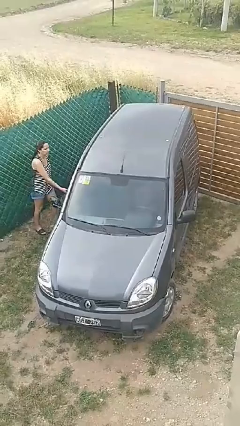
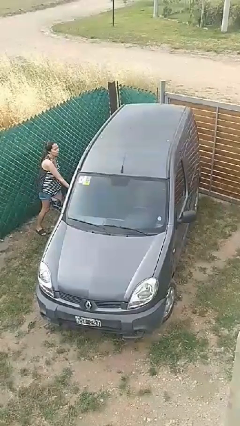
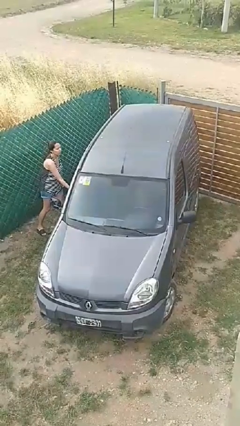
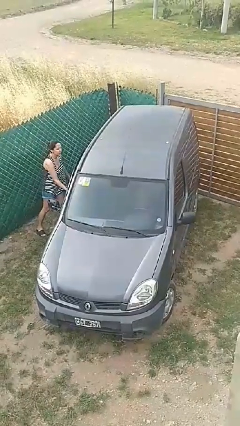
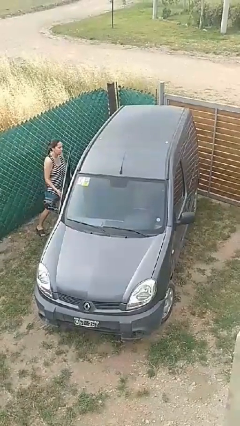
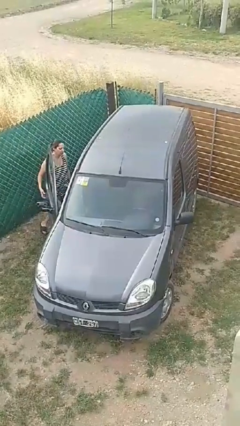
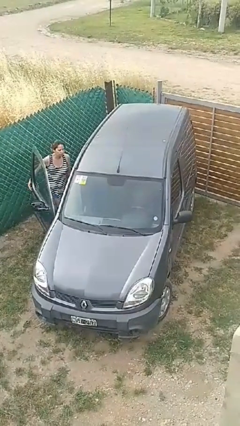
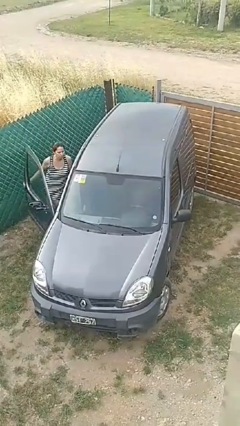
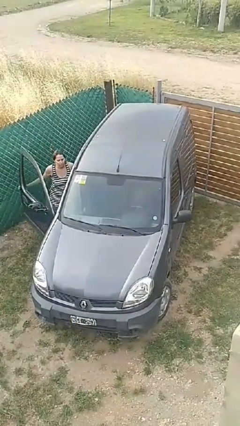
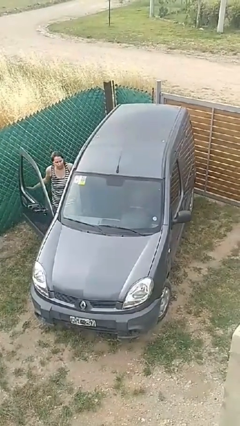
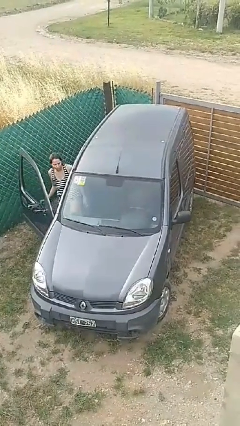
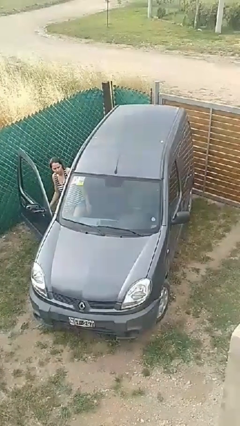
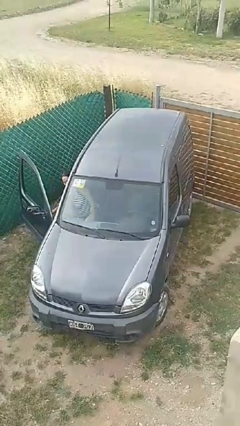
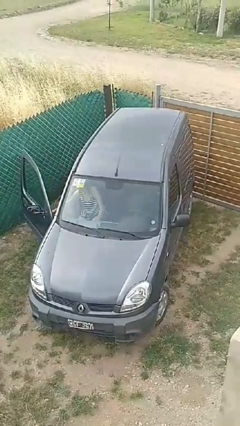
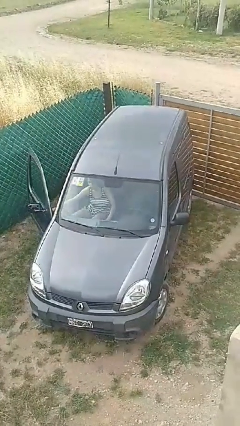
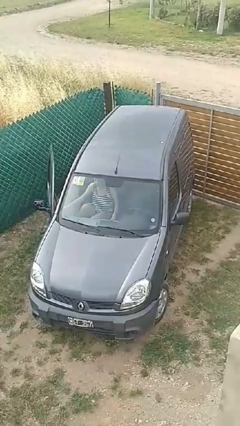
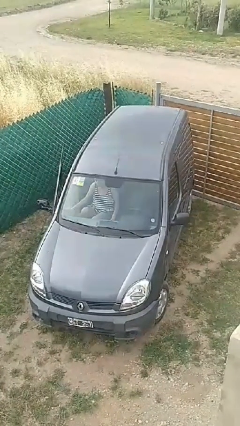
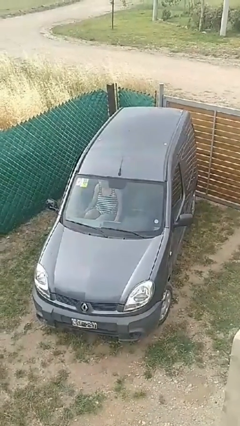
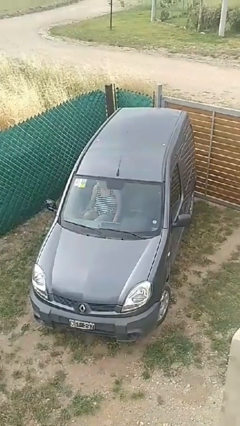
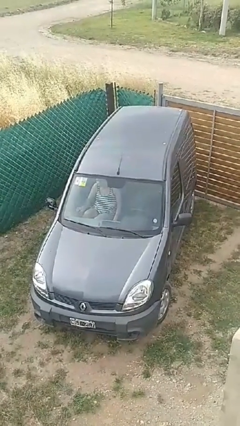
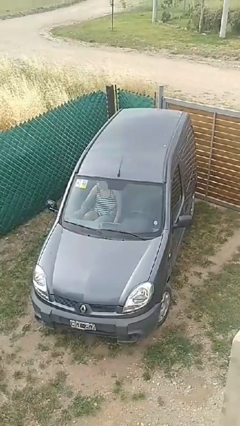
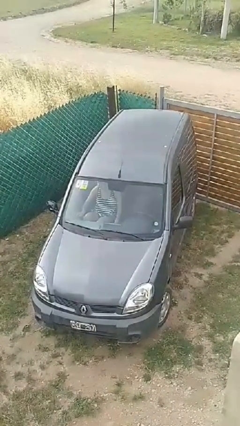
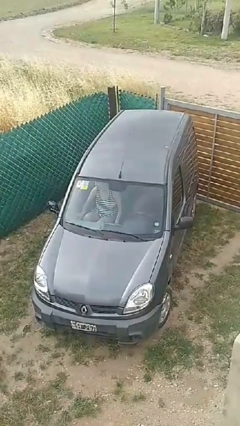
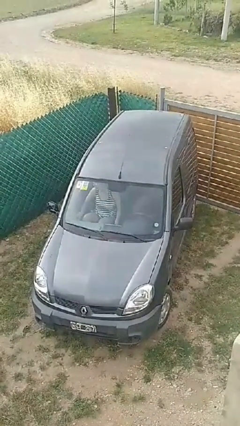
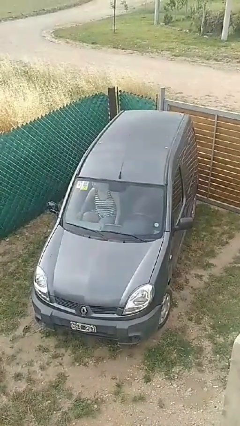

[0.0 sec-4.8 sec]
car picks up person

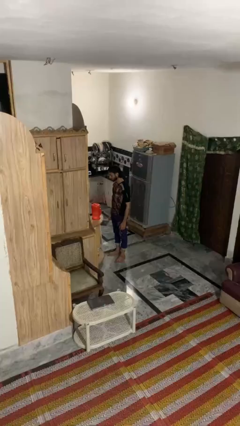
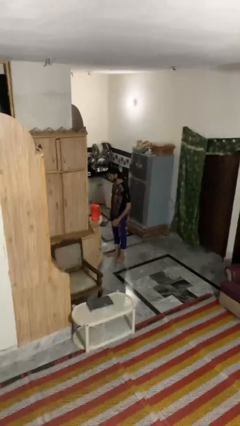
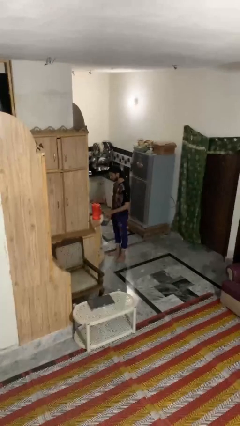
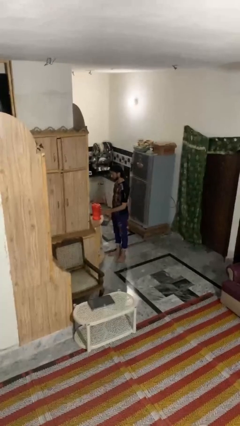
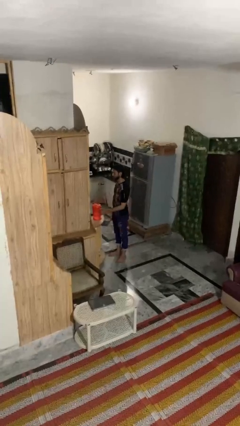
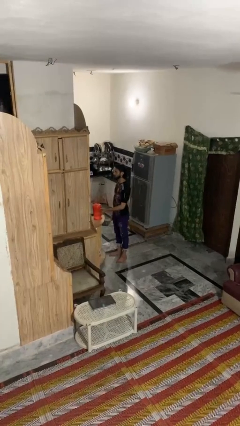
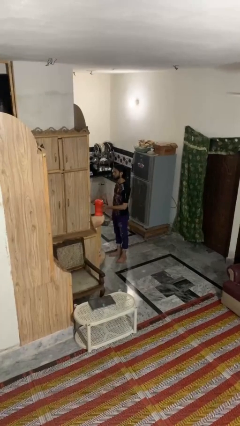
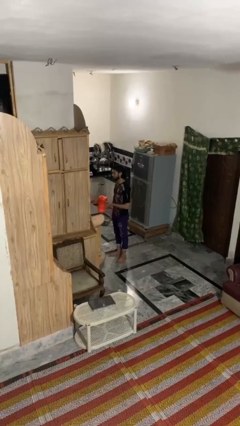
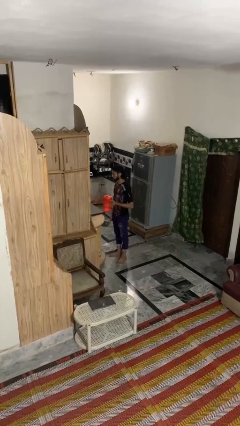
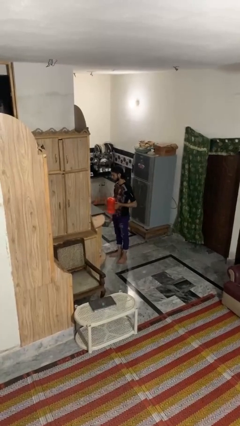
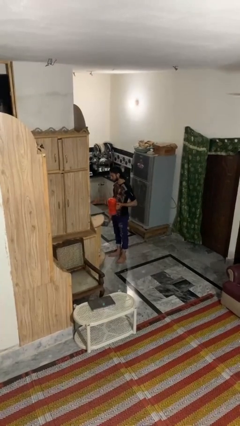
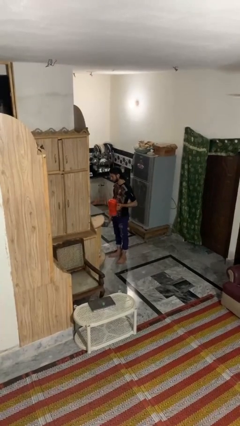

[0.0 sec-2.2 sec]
person picks up object from countertop

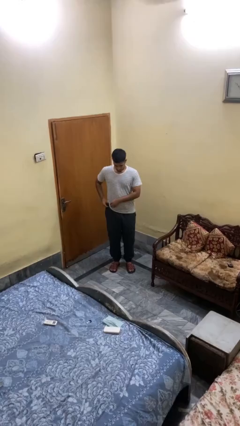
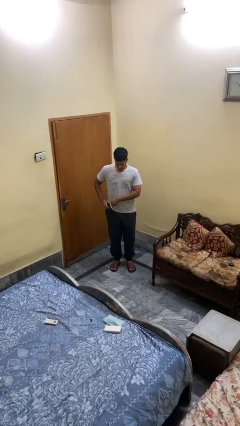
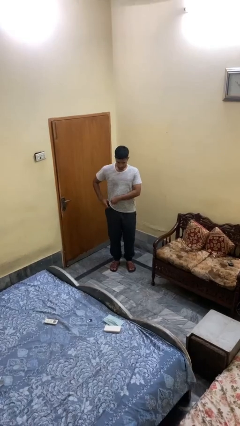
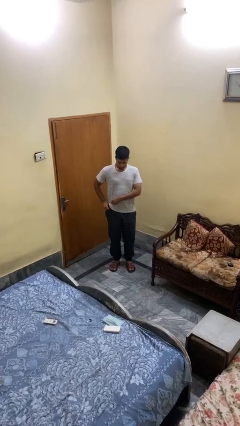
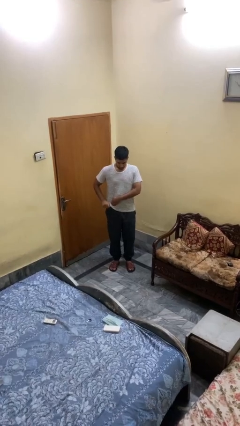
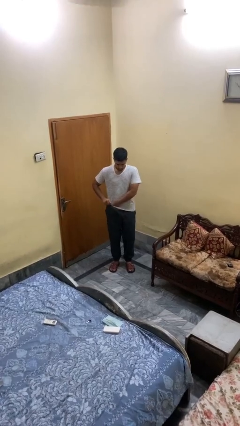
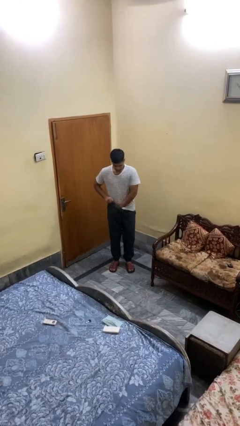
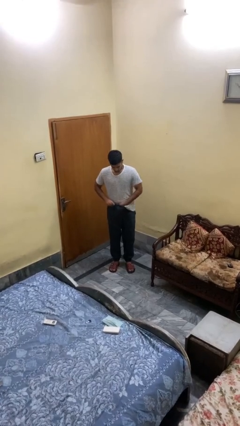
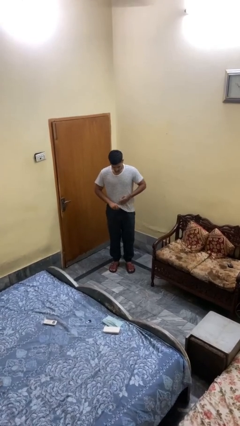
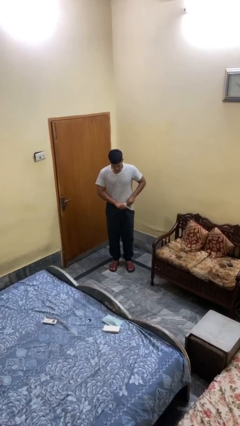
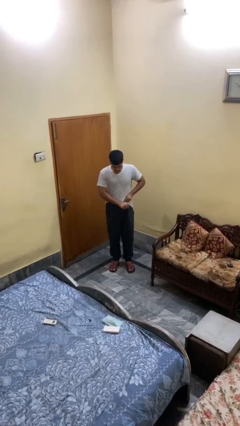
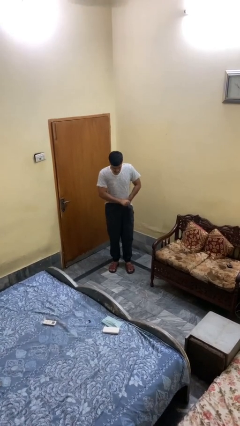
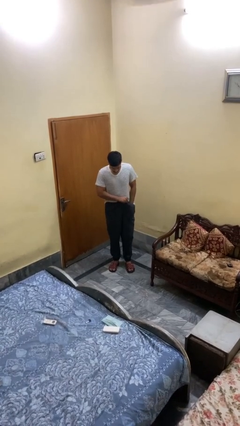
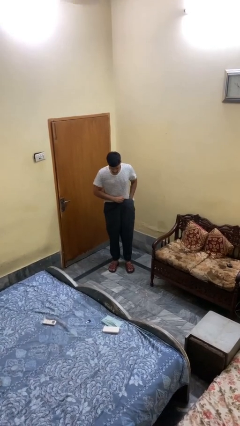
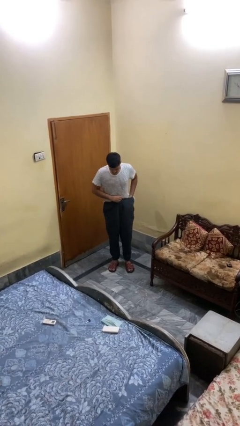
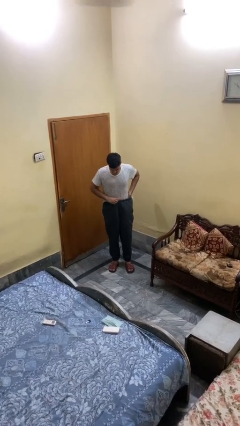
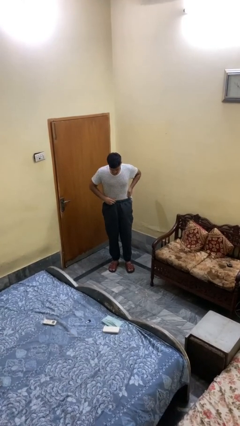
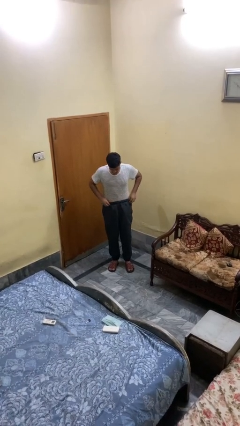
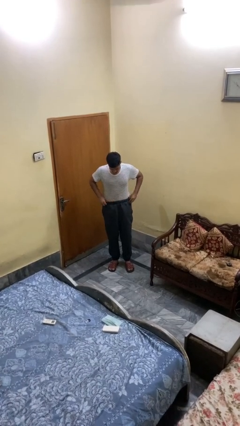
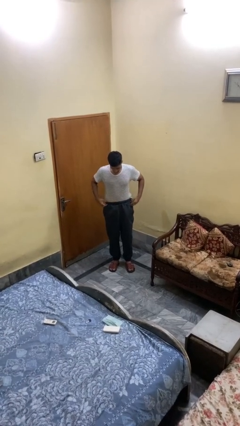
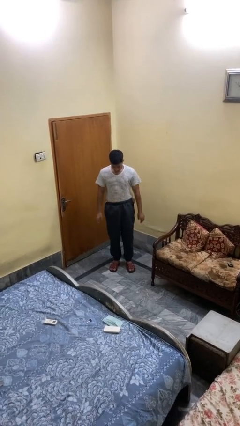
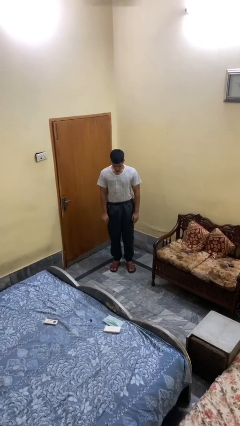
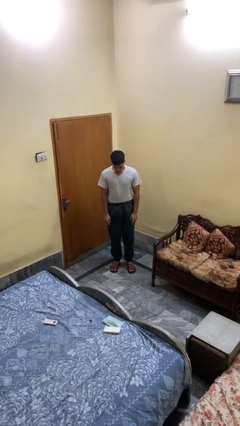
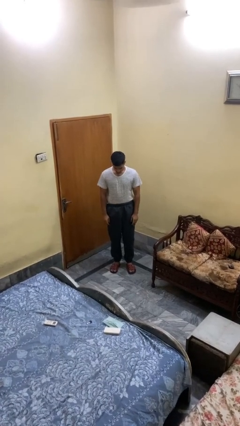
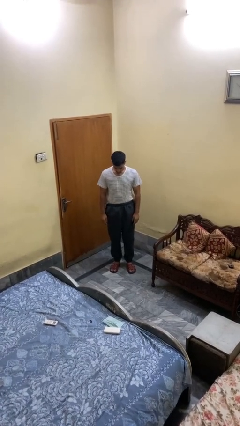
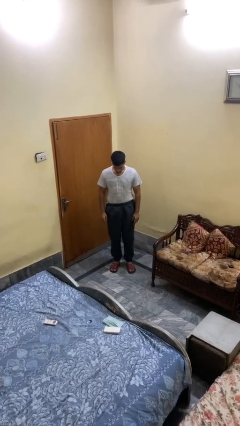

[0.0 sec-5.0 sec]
person tucks in shirt

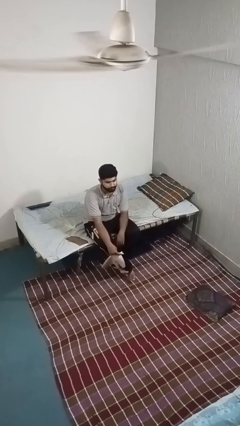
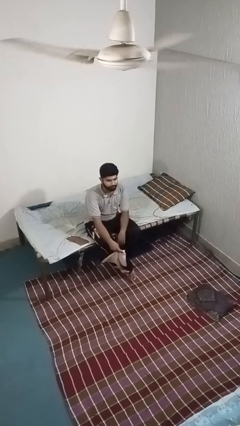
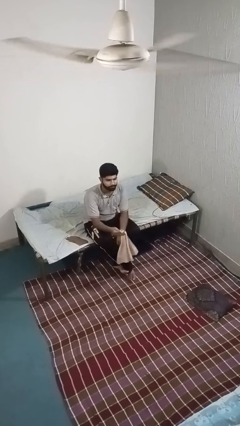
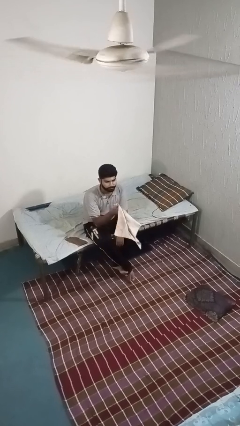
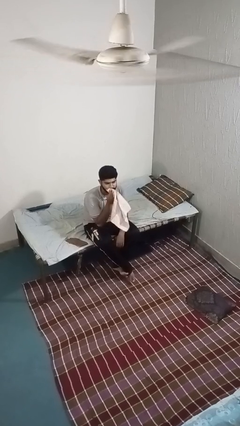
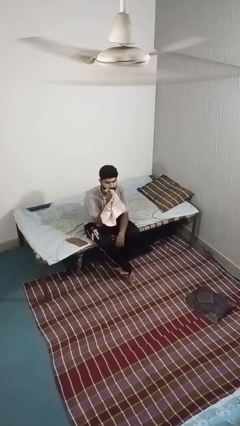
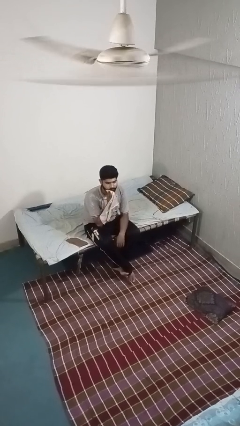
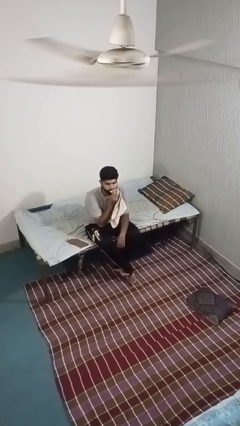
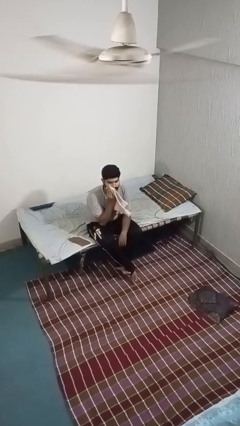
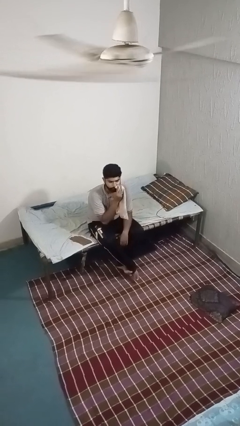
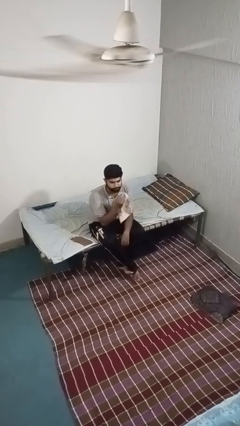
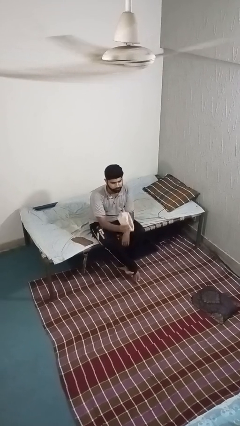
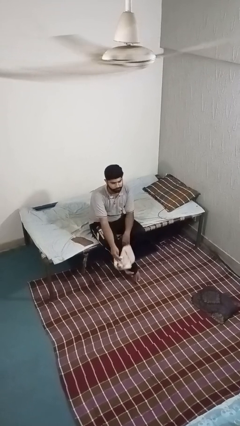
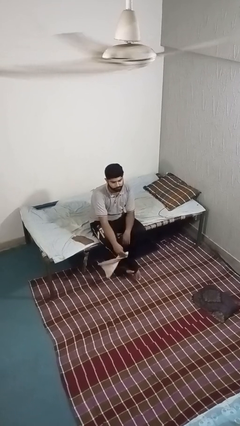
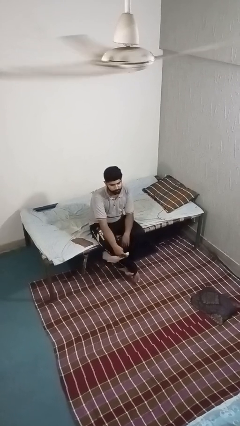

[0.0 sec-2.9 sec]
person wipes mouth with napkin

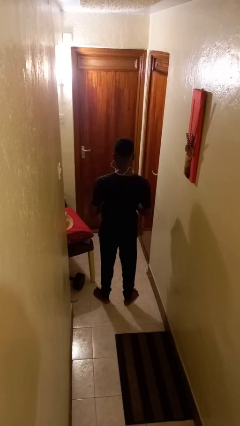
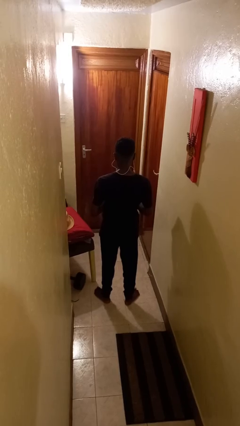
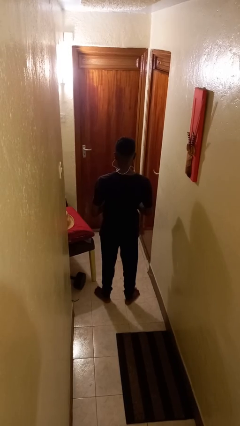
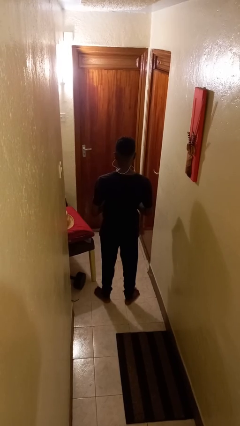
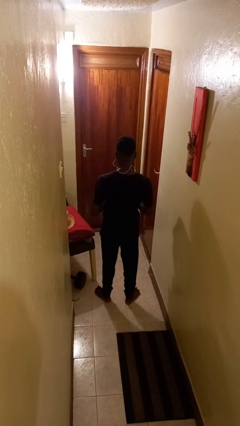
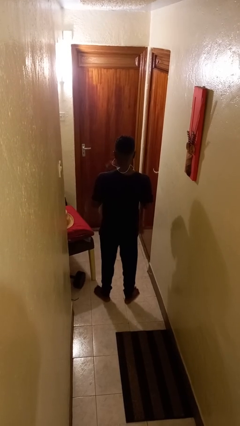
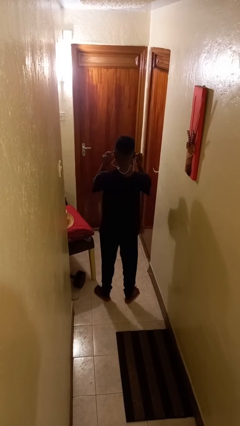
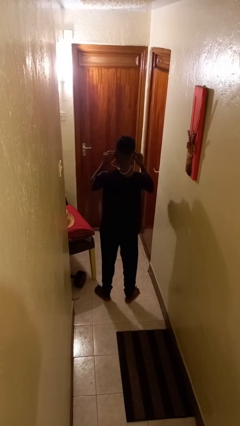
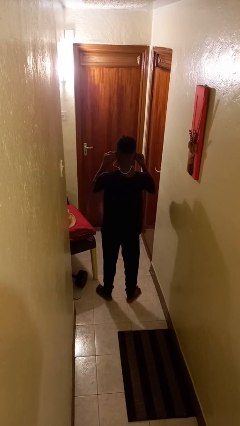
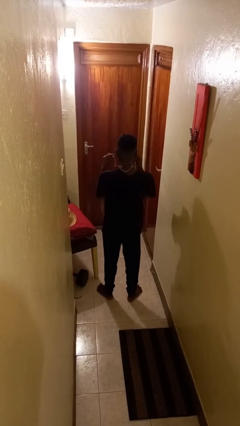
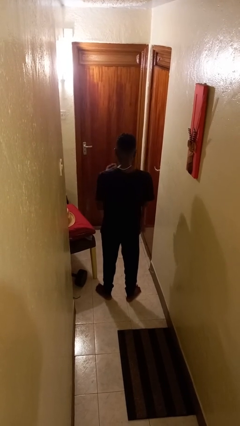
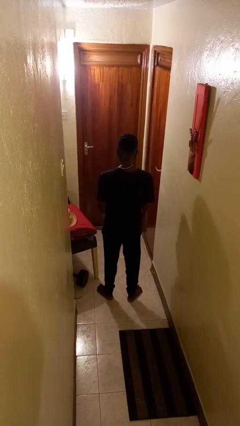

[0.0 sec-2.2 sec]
person takes off headphones

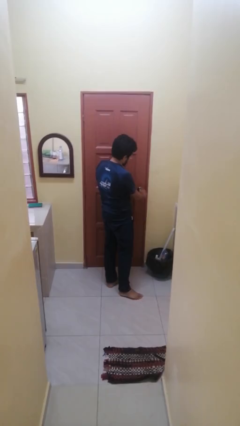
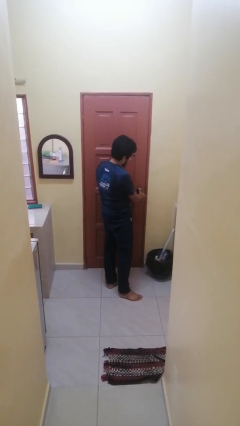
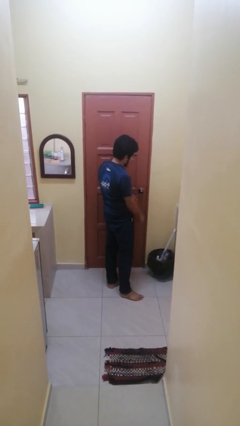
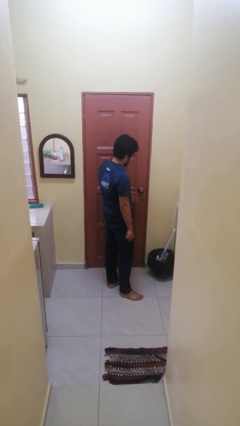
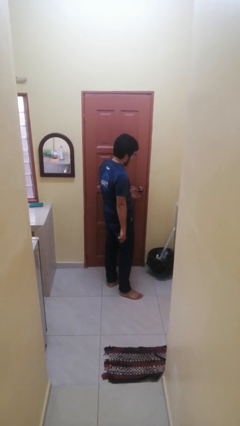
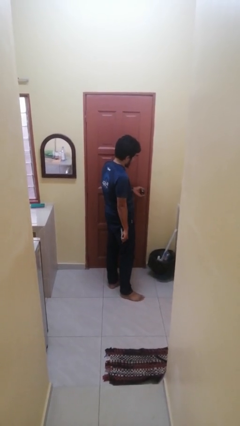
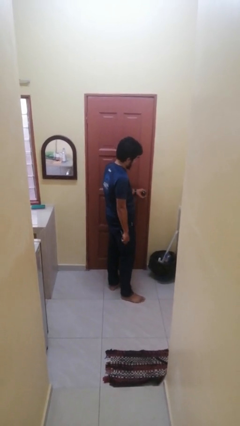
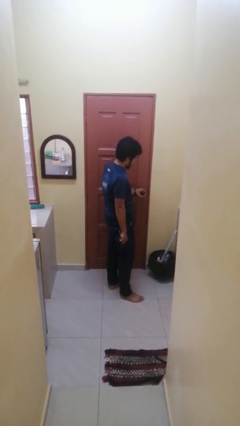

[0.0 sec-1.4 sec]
person unlocks door with keys
